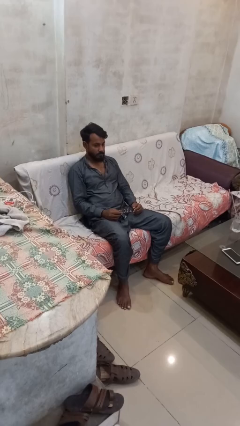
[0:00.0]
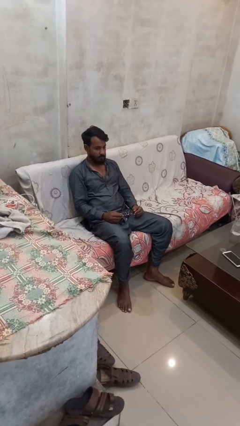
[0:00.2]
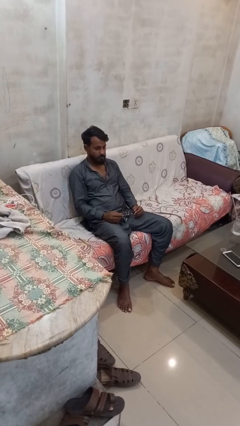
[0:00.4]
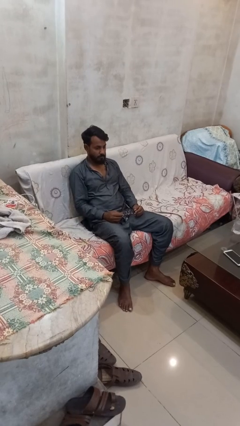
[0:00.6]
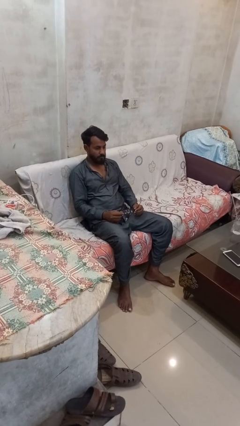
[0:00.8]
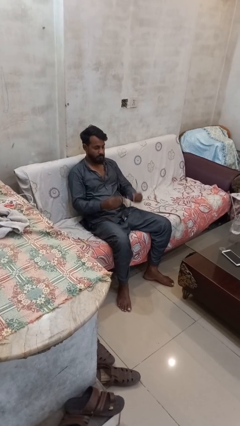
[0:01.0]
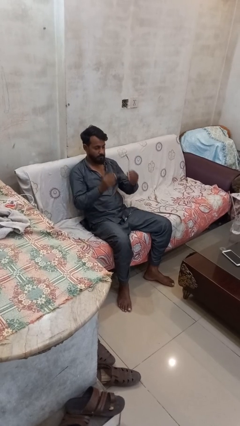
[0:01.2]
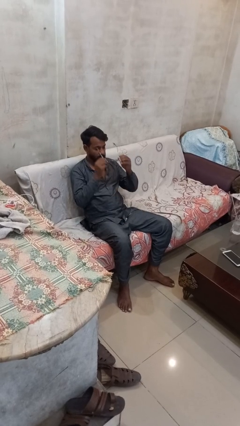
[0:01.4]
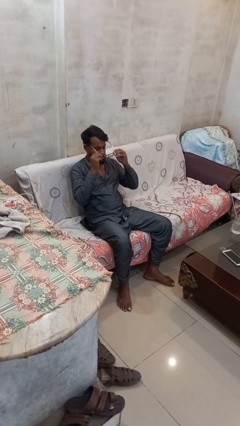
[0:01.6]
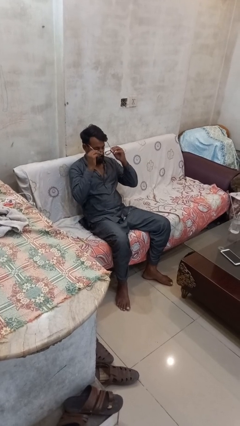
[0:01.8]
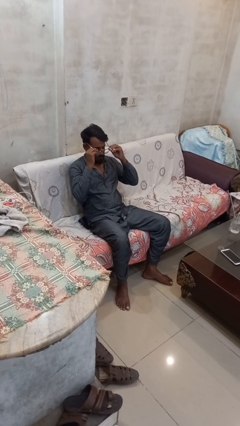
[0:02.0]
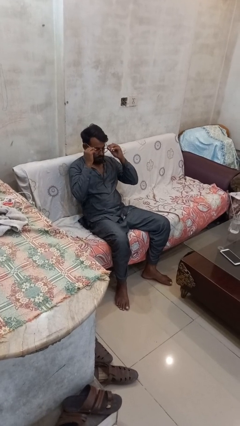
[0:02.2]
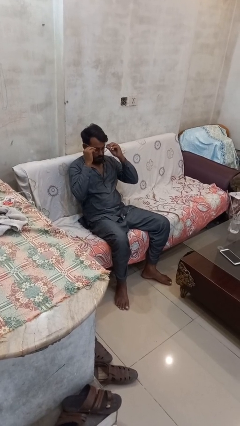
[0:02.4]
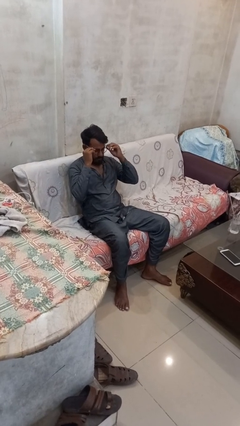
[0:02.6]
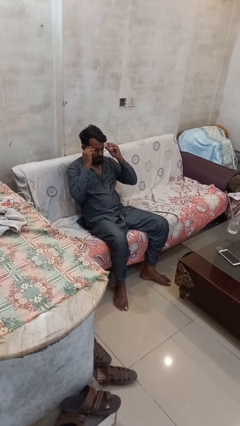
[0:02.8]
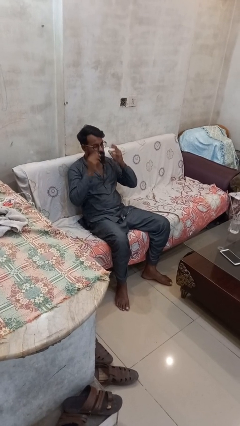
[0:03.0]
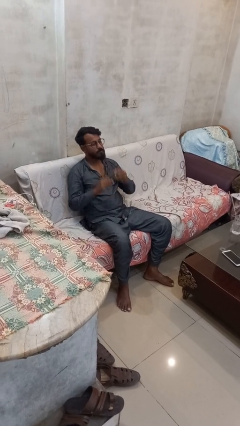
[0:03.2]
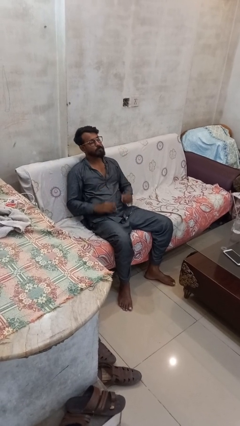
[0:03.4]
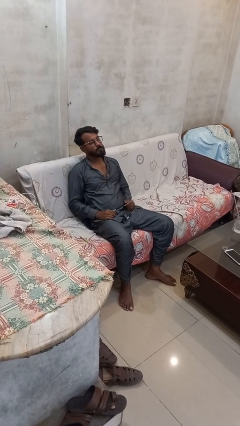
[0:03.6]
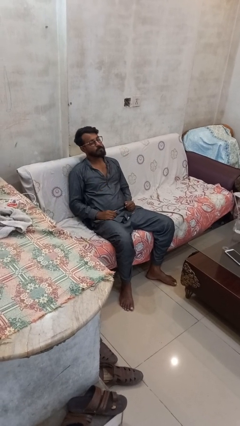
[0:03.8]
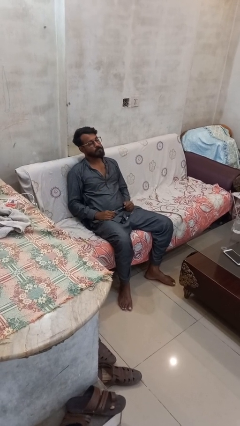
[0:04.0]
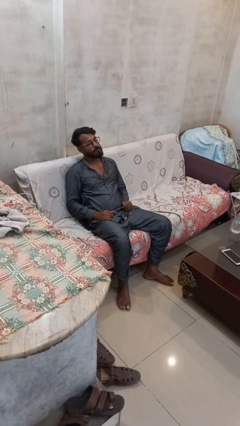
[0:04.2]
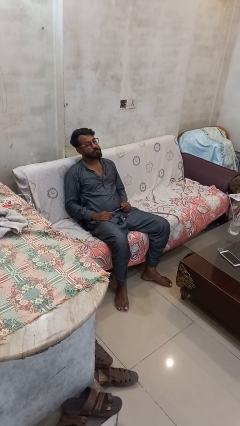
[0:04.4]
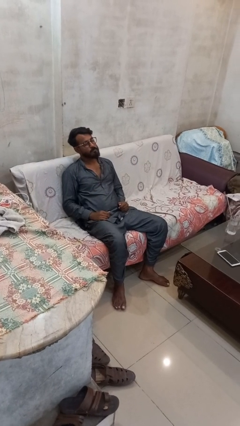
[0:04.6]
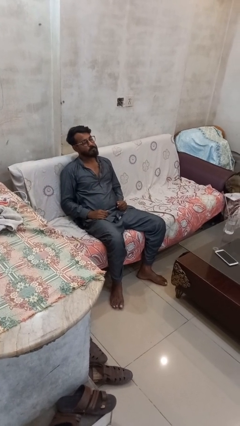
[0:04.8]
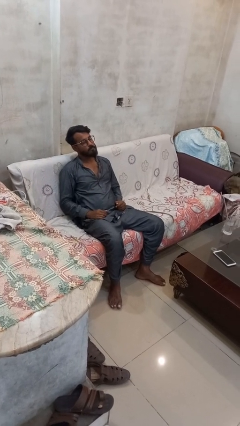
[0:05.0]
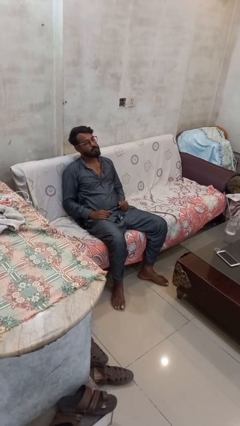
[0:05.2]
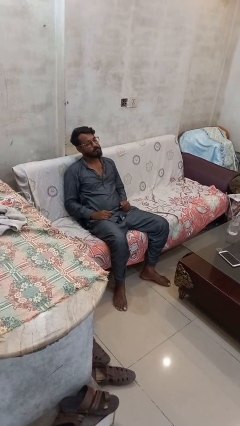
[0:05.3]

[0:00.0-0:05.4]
person puts on glasses

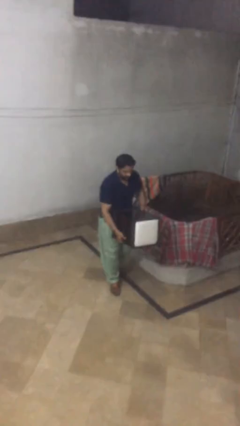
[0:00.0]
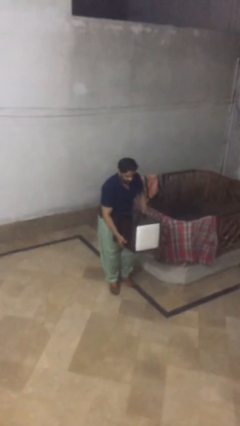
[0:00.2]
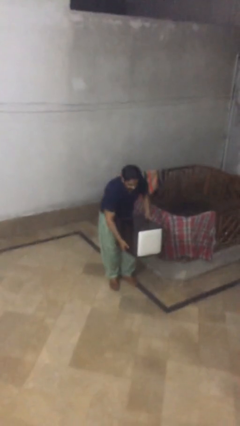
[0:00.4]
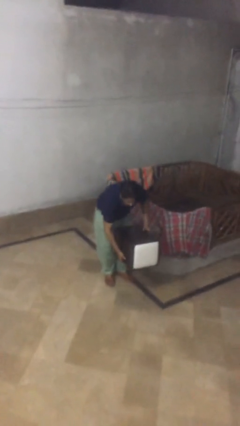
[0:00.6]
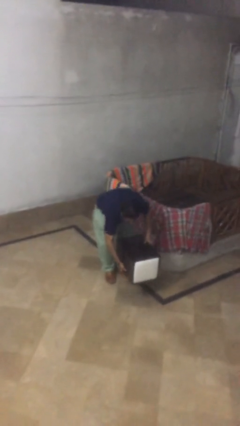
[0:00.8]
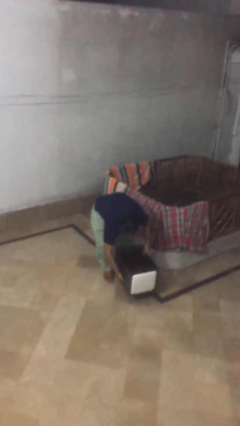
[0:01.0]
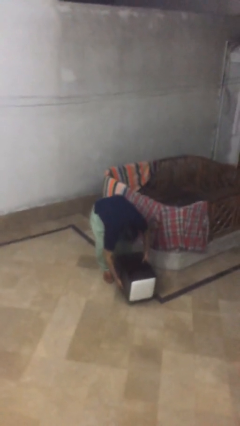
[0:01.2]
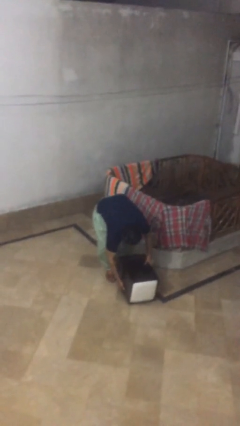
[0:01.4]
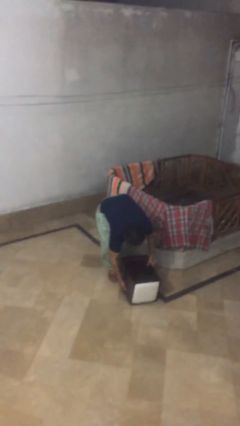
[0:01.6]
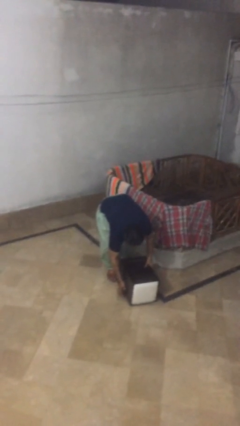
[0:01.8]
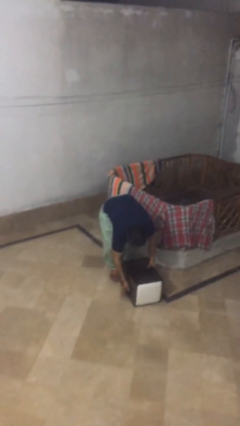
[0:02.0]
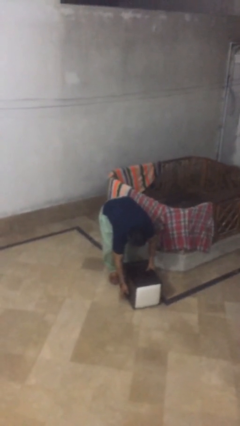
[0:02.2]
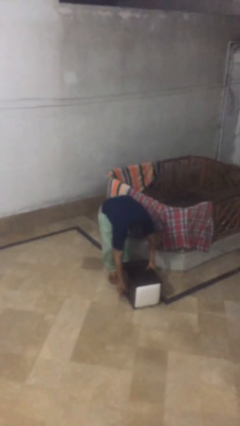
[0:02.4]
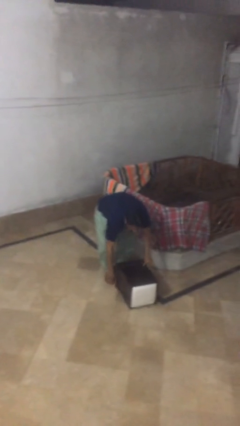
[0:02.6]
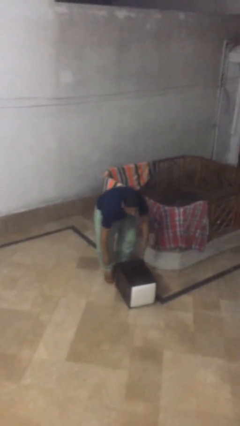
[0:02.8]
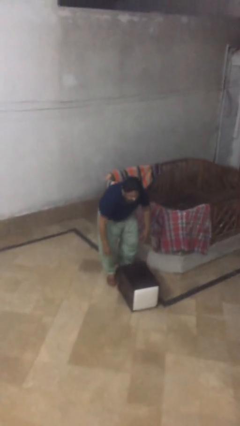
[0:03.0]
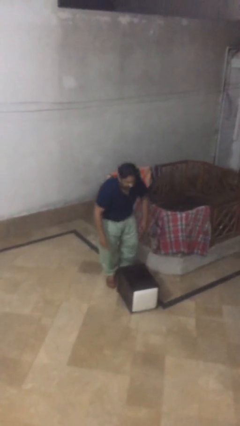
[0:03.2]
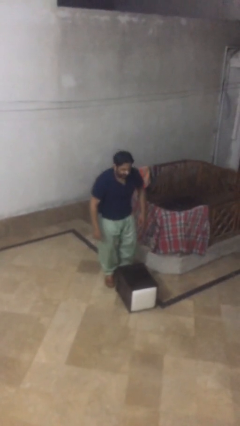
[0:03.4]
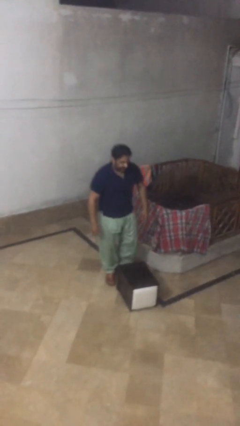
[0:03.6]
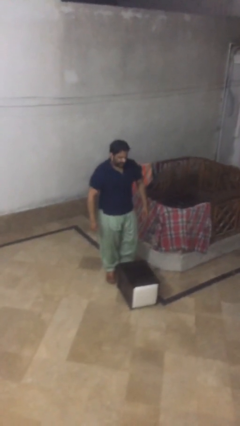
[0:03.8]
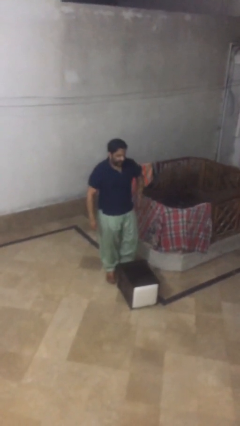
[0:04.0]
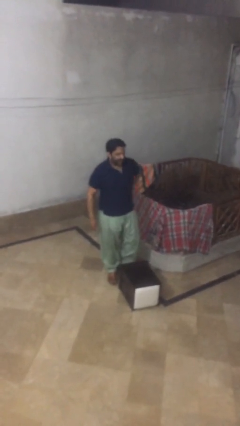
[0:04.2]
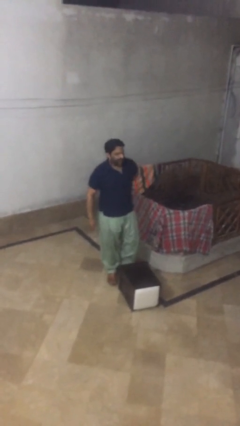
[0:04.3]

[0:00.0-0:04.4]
person puts down object on floor

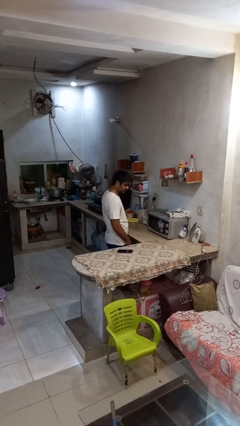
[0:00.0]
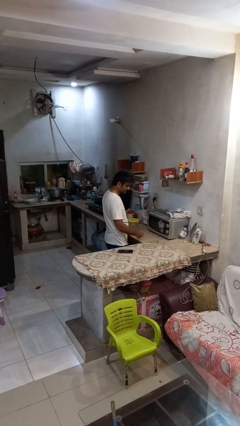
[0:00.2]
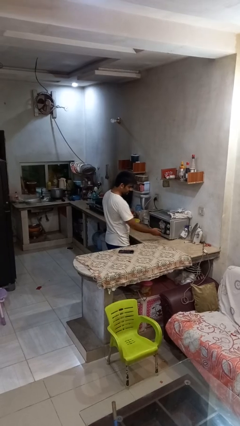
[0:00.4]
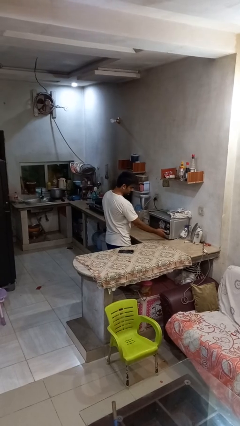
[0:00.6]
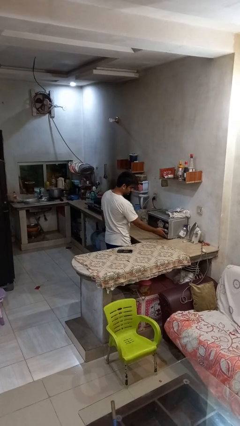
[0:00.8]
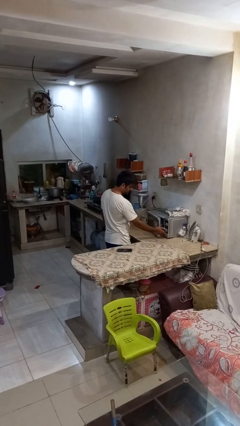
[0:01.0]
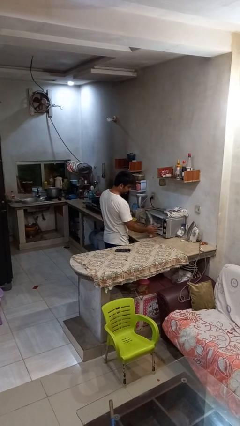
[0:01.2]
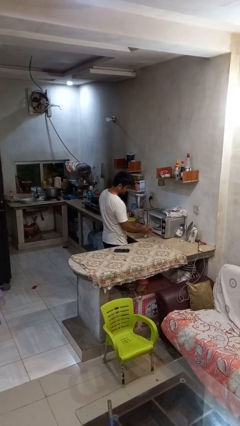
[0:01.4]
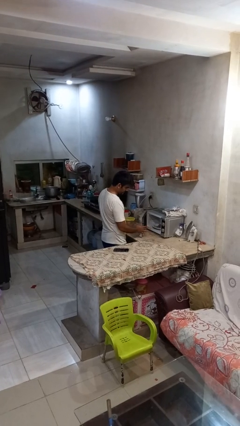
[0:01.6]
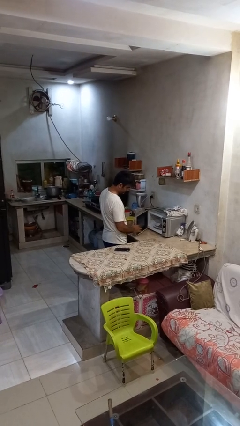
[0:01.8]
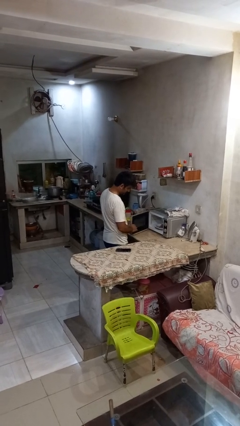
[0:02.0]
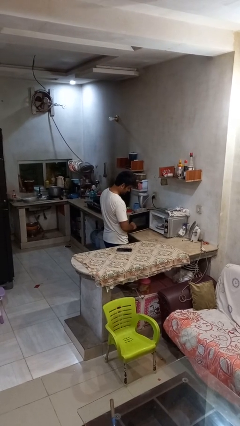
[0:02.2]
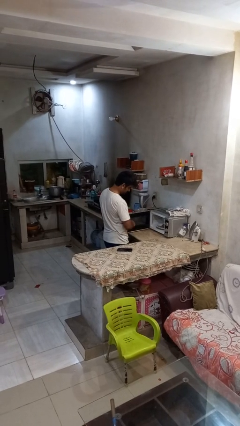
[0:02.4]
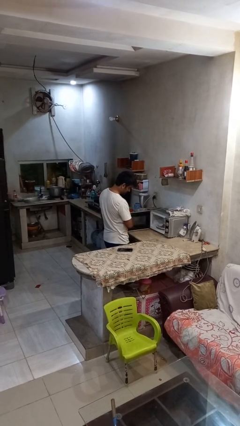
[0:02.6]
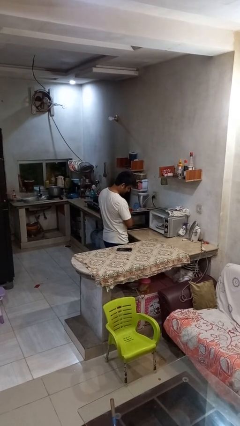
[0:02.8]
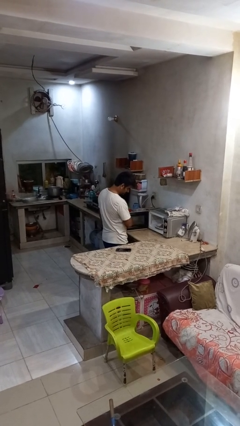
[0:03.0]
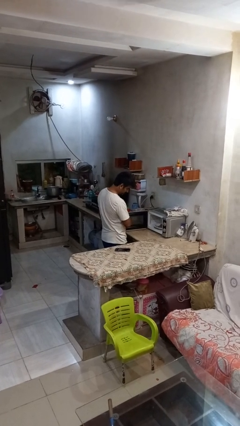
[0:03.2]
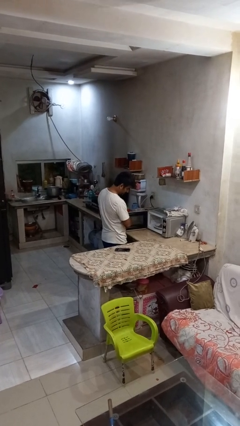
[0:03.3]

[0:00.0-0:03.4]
person opens microwave

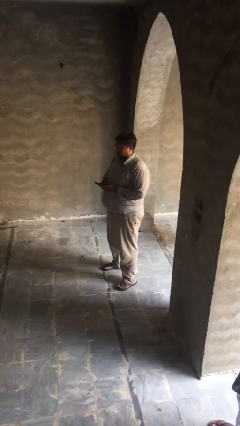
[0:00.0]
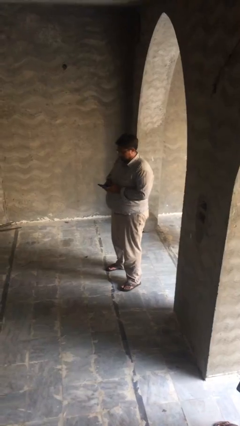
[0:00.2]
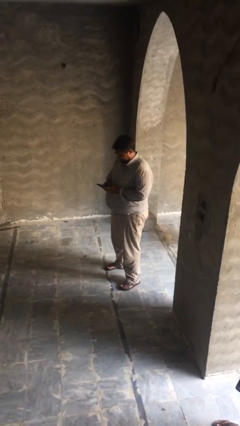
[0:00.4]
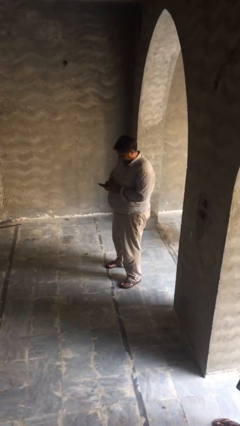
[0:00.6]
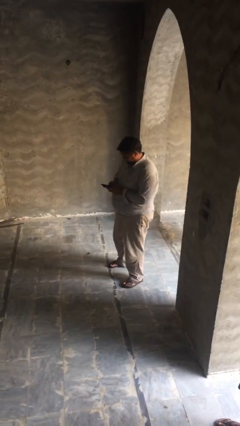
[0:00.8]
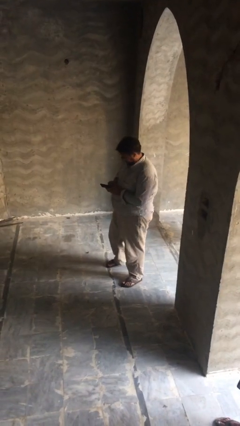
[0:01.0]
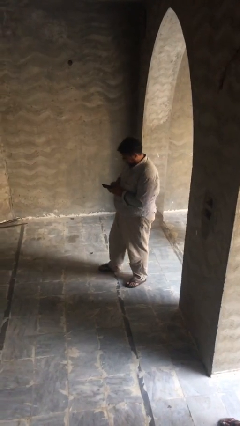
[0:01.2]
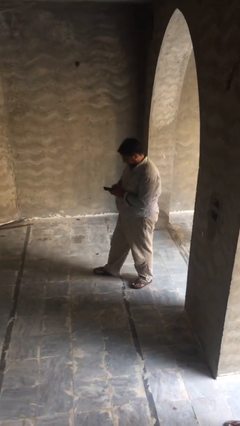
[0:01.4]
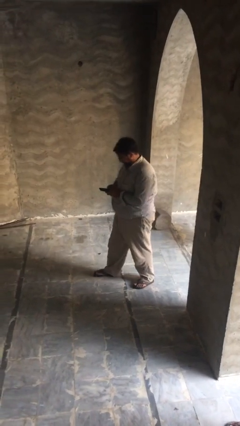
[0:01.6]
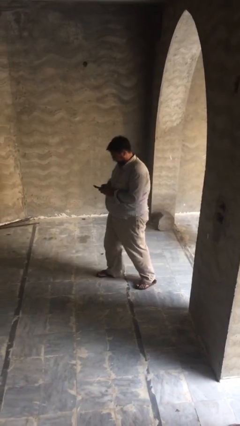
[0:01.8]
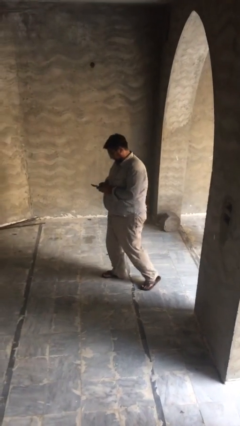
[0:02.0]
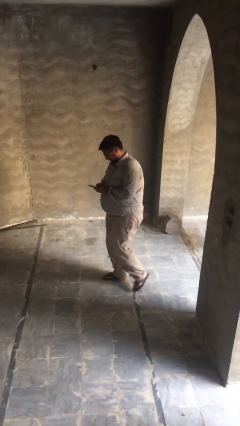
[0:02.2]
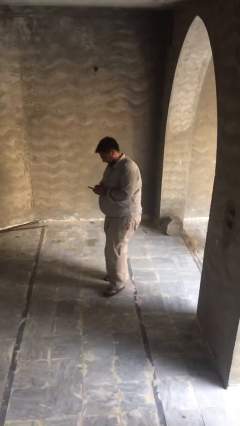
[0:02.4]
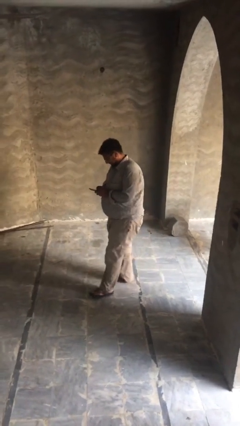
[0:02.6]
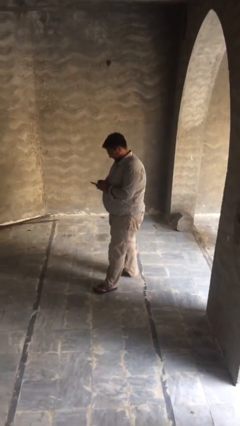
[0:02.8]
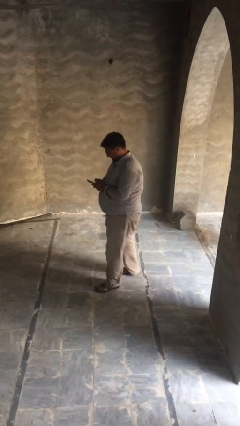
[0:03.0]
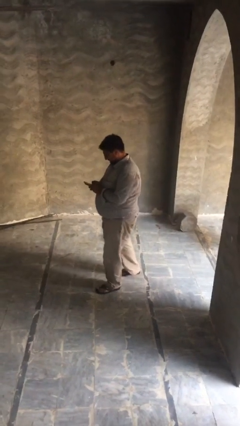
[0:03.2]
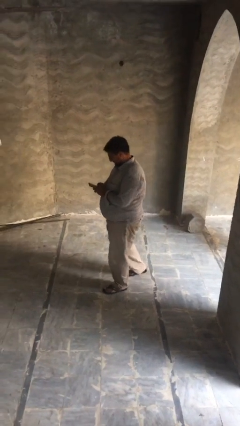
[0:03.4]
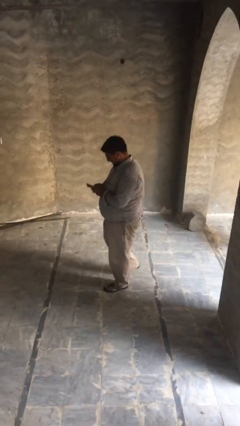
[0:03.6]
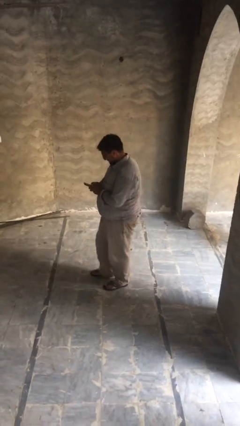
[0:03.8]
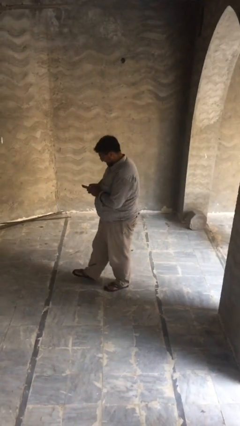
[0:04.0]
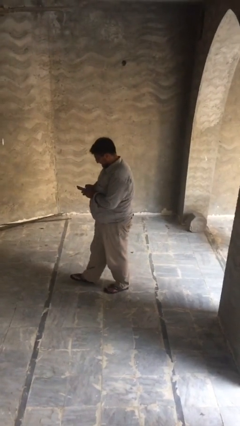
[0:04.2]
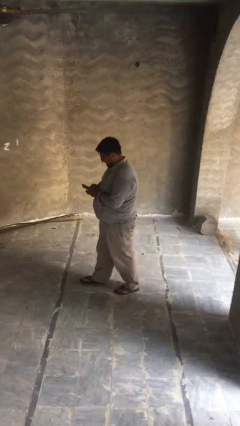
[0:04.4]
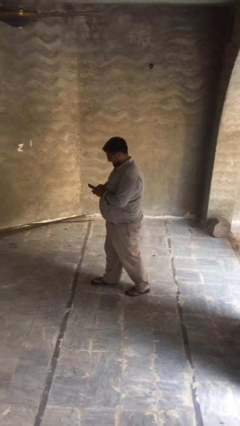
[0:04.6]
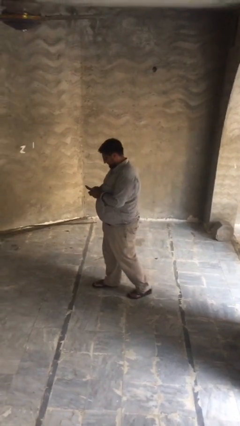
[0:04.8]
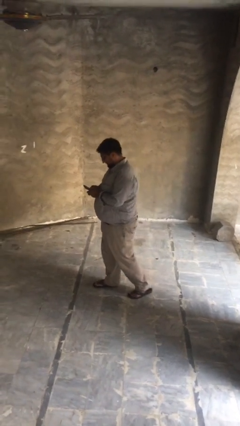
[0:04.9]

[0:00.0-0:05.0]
person texts on phone
